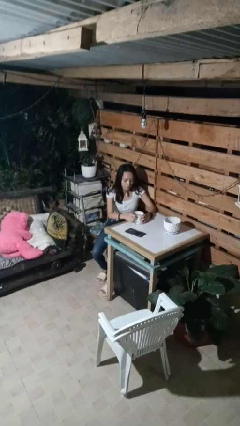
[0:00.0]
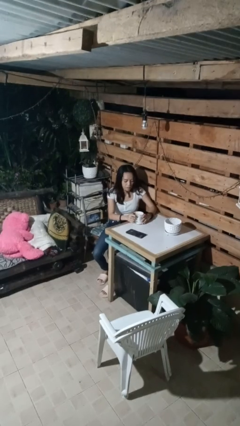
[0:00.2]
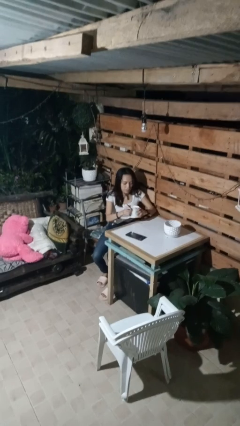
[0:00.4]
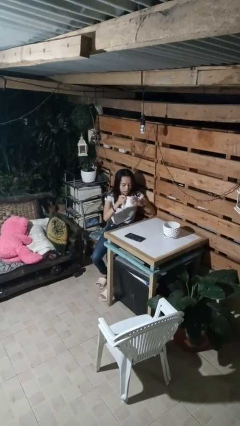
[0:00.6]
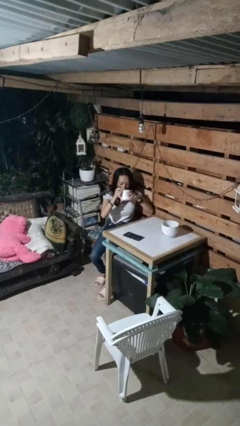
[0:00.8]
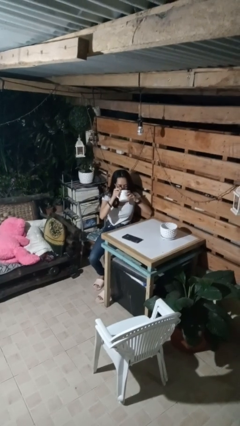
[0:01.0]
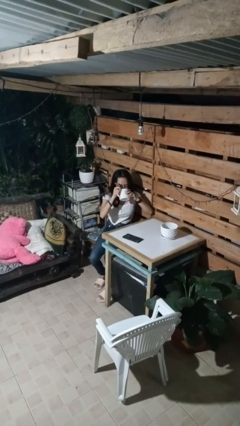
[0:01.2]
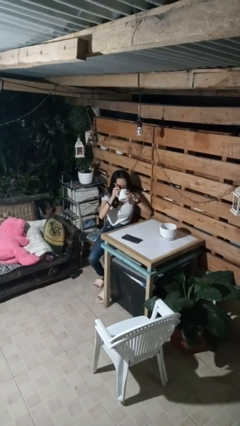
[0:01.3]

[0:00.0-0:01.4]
person drinks from mug

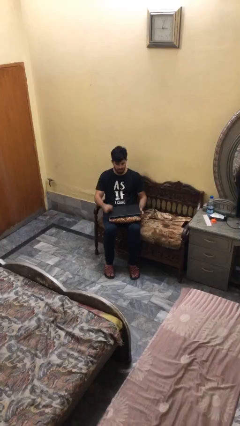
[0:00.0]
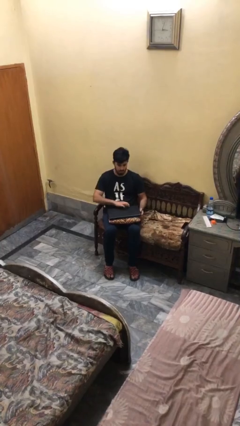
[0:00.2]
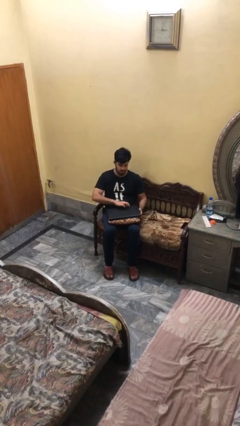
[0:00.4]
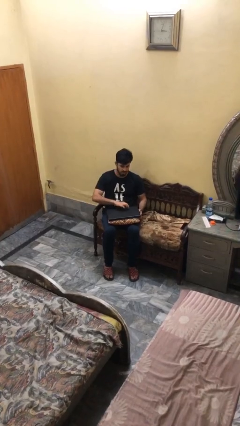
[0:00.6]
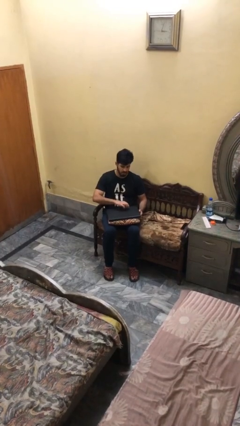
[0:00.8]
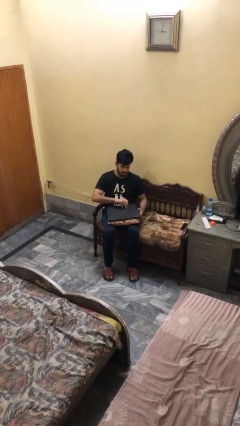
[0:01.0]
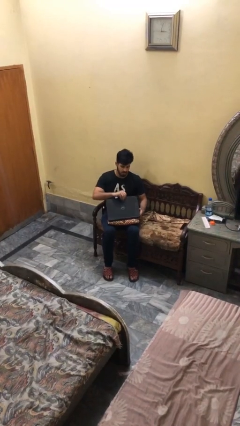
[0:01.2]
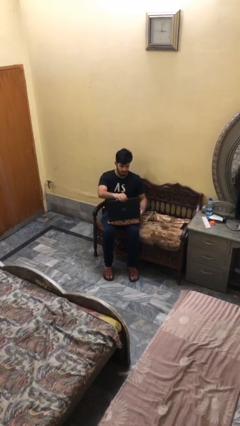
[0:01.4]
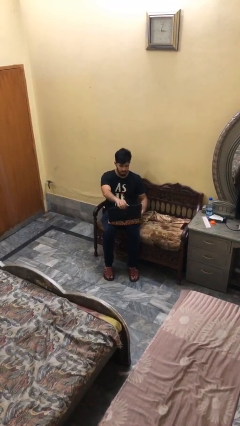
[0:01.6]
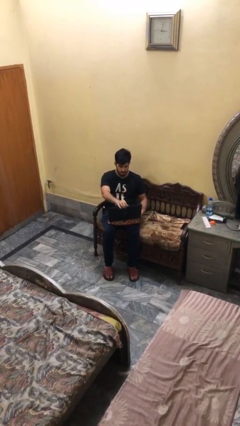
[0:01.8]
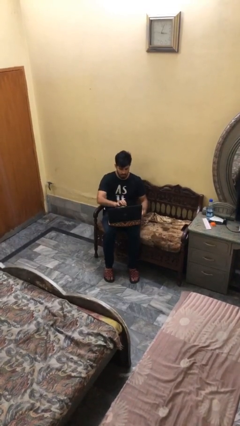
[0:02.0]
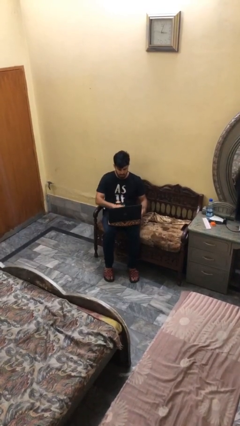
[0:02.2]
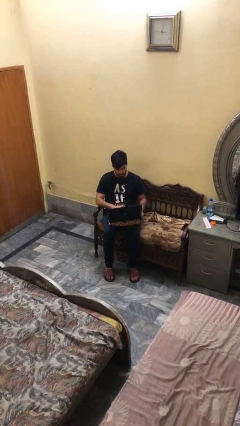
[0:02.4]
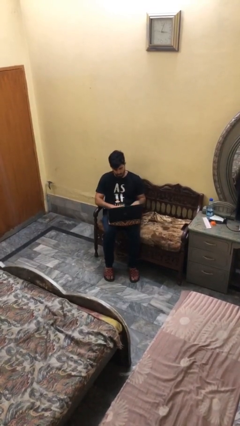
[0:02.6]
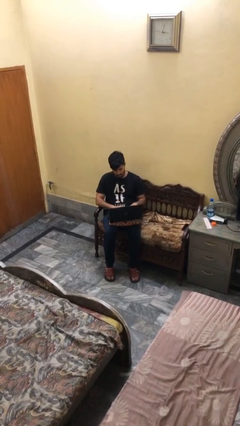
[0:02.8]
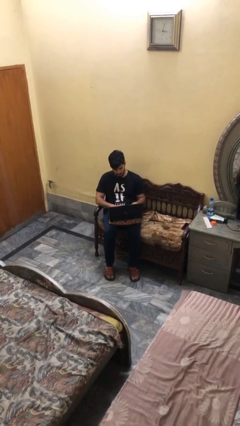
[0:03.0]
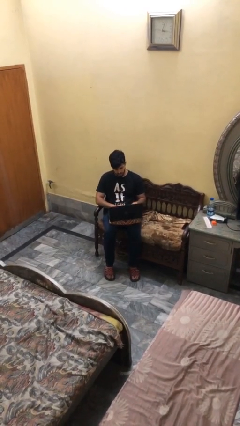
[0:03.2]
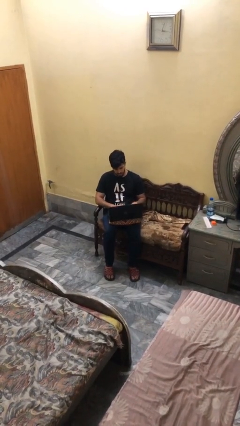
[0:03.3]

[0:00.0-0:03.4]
person opens laptop

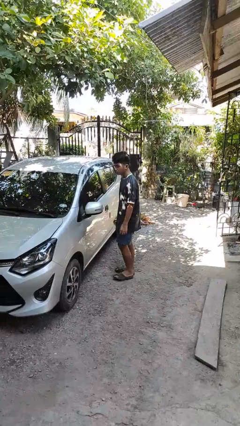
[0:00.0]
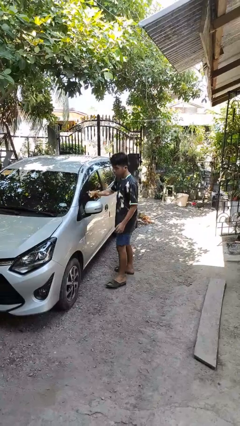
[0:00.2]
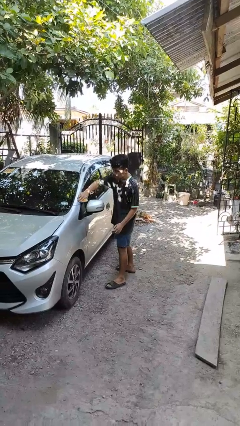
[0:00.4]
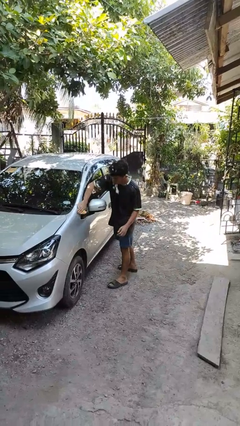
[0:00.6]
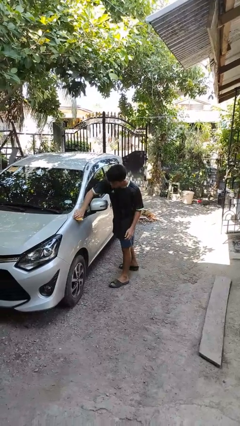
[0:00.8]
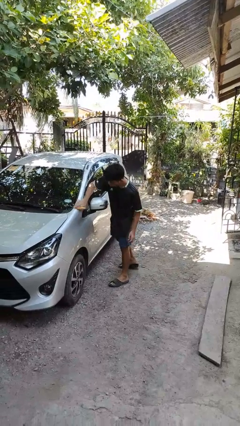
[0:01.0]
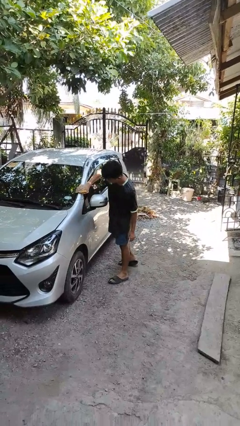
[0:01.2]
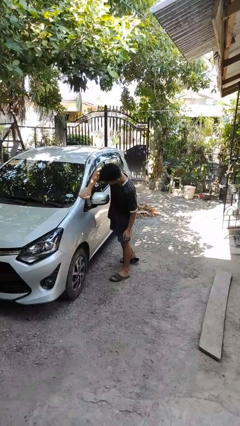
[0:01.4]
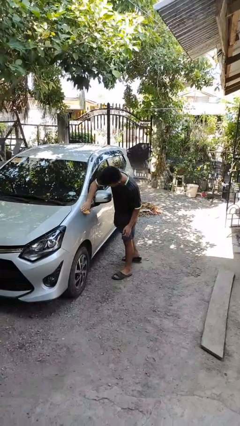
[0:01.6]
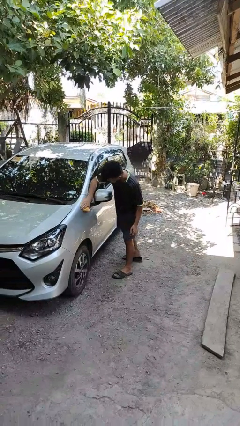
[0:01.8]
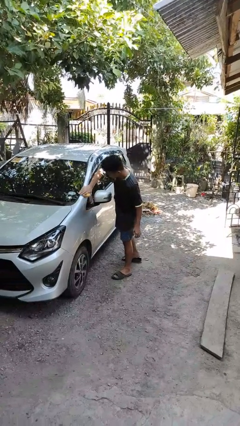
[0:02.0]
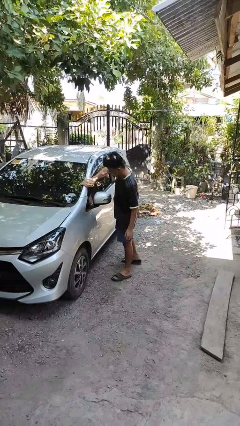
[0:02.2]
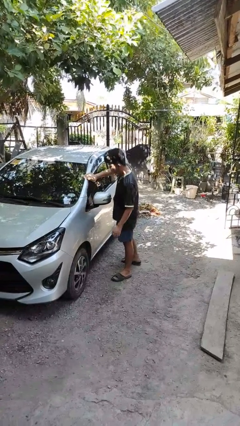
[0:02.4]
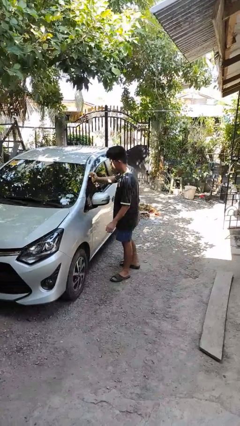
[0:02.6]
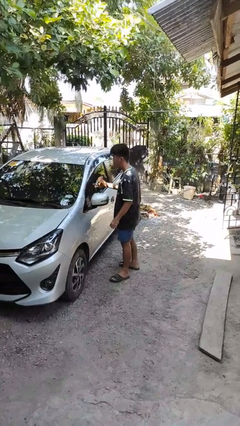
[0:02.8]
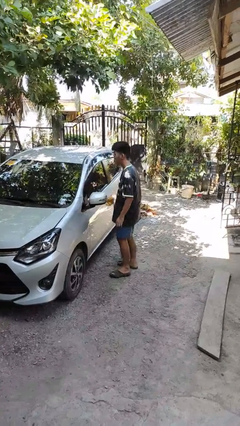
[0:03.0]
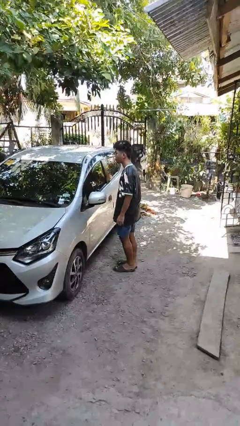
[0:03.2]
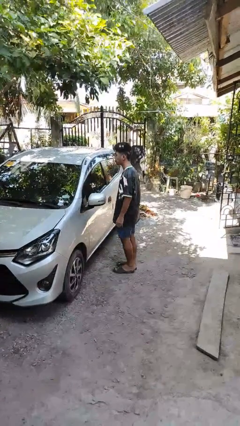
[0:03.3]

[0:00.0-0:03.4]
person polishes car with rag

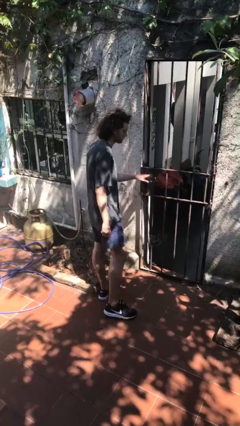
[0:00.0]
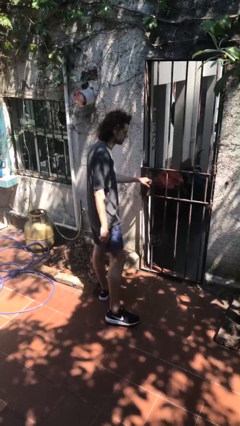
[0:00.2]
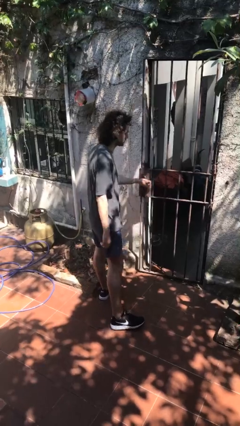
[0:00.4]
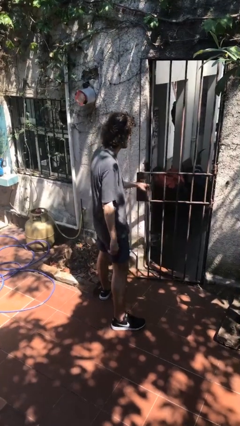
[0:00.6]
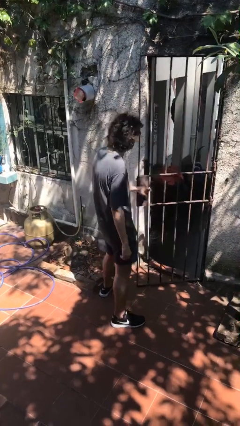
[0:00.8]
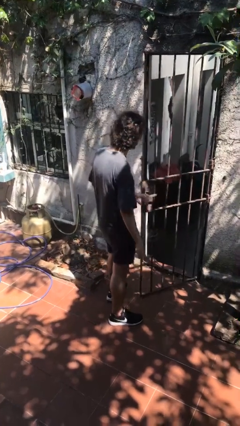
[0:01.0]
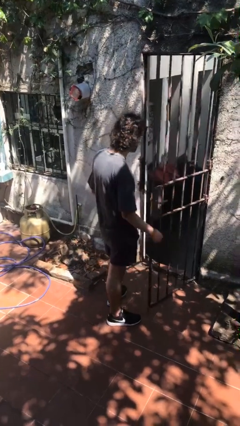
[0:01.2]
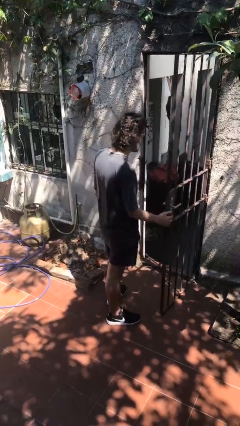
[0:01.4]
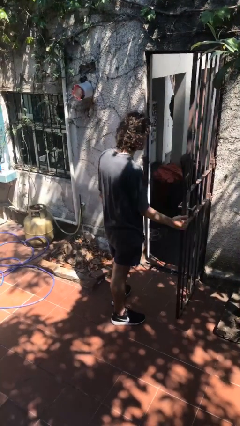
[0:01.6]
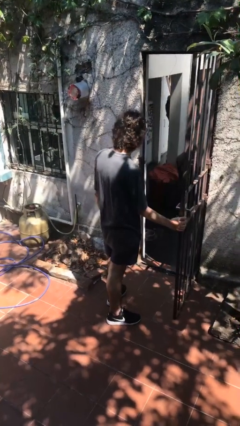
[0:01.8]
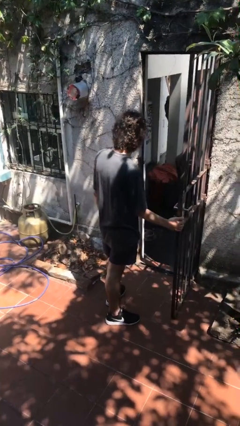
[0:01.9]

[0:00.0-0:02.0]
person opens facility door

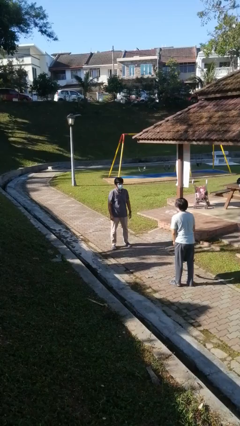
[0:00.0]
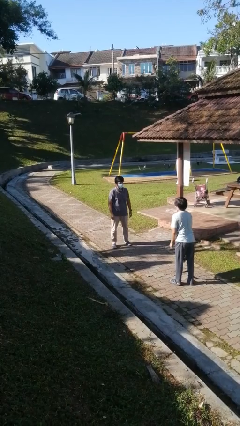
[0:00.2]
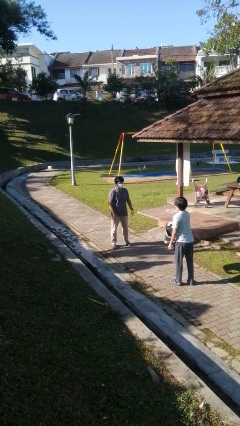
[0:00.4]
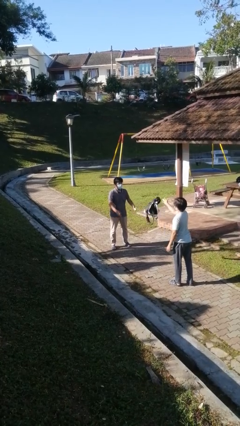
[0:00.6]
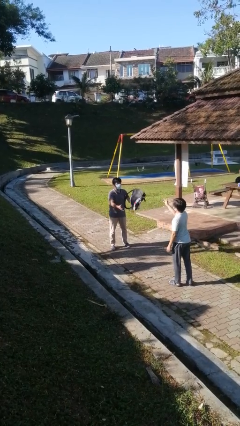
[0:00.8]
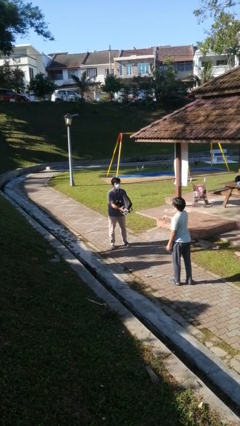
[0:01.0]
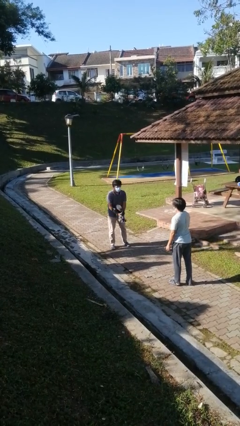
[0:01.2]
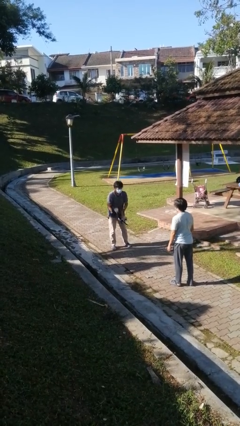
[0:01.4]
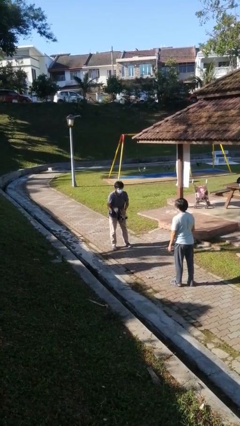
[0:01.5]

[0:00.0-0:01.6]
person catches object from person

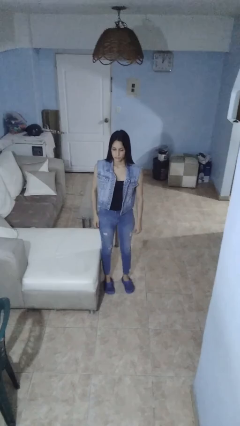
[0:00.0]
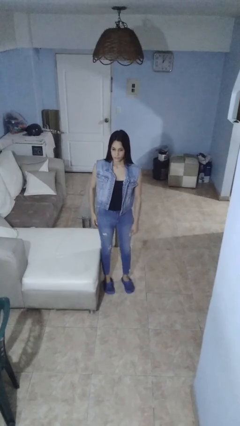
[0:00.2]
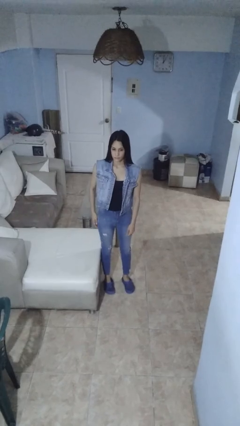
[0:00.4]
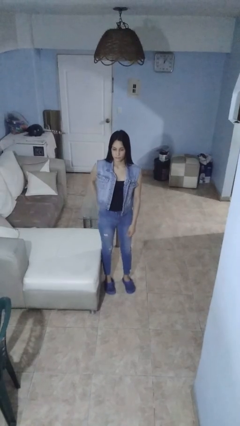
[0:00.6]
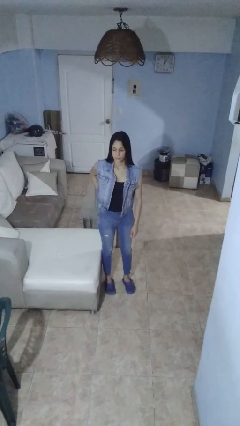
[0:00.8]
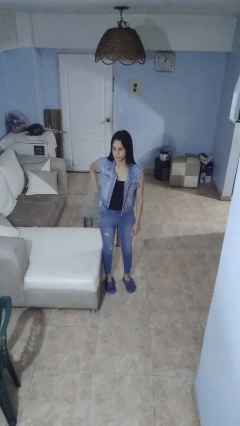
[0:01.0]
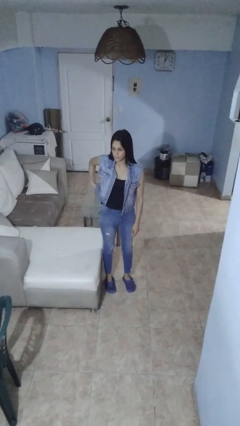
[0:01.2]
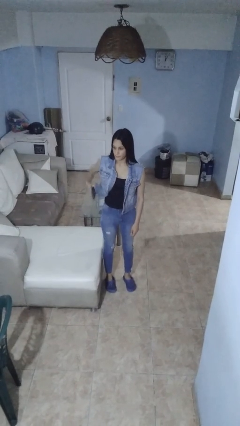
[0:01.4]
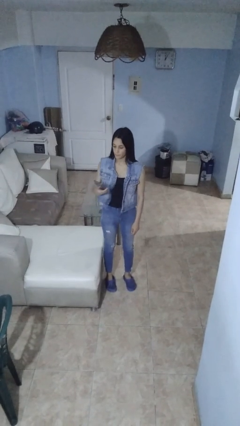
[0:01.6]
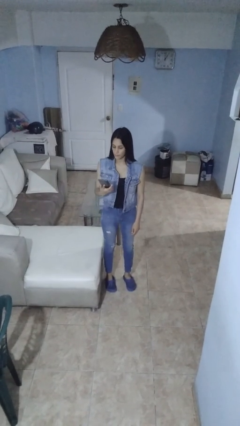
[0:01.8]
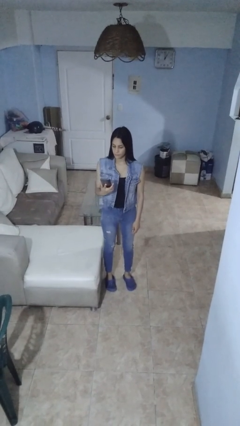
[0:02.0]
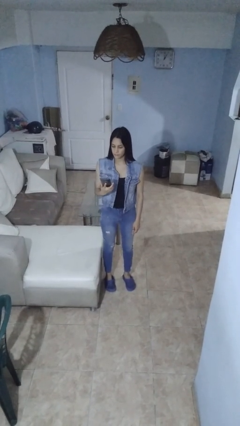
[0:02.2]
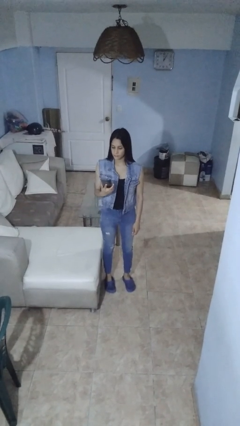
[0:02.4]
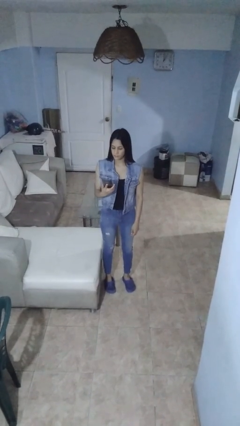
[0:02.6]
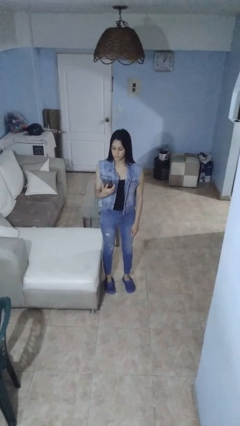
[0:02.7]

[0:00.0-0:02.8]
person takes phone from pocket

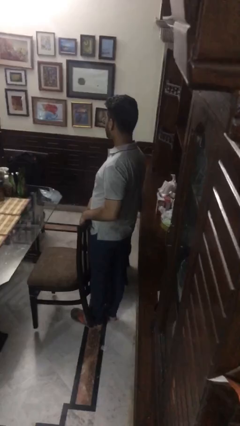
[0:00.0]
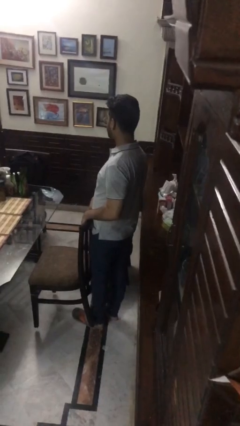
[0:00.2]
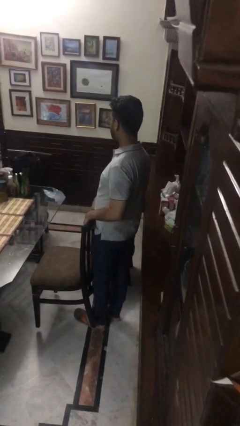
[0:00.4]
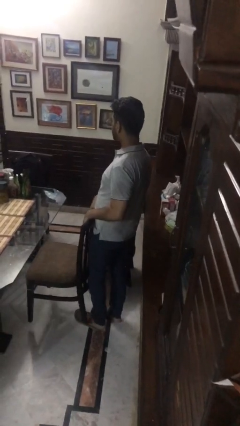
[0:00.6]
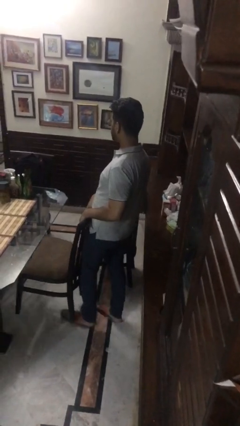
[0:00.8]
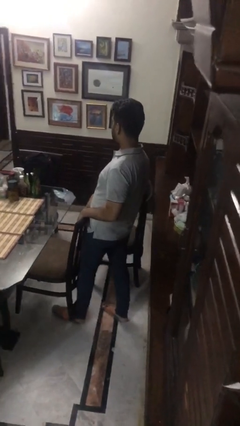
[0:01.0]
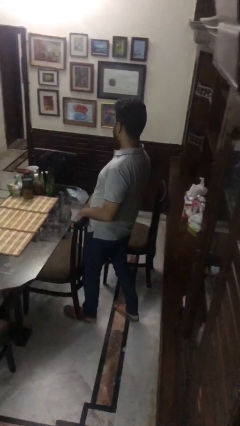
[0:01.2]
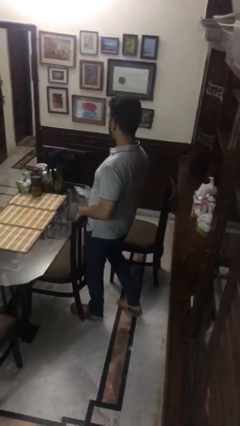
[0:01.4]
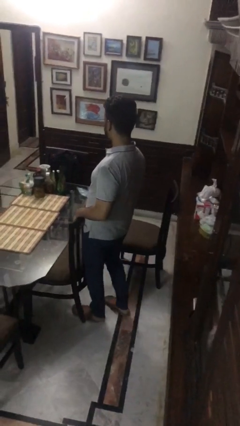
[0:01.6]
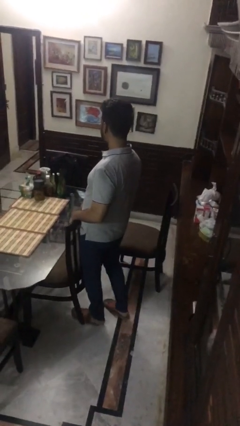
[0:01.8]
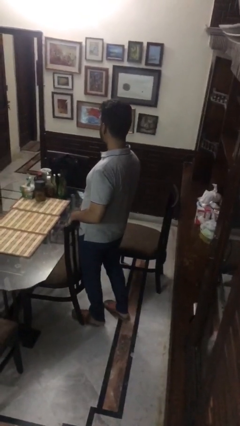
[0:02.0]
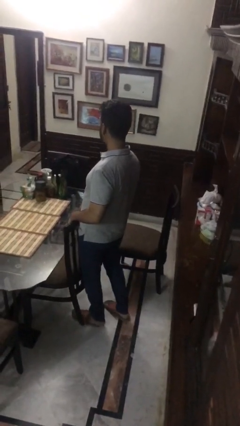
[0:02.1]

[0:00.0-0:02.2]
person pushes in chair

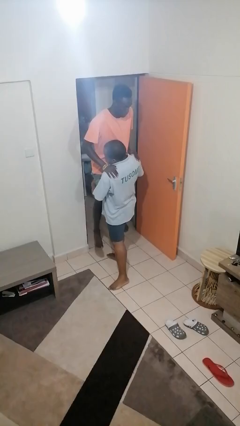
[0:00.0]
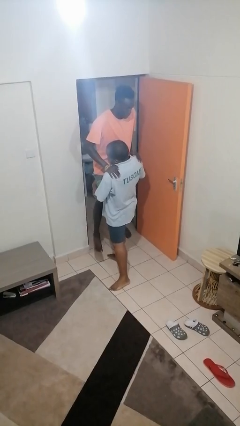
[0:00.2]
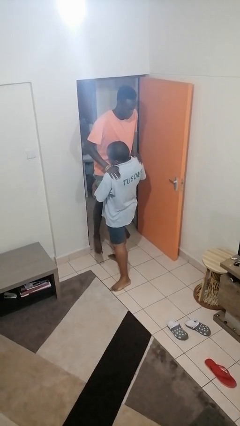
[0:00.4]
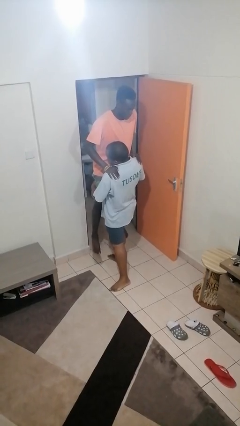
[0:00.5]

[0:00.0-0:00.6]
person picks up person
